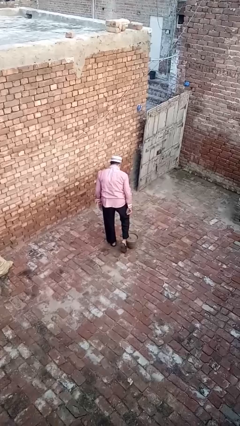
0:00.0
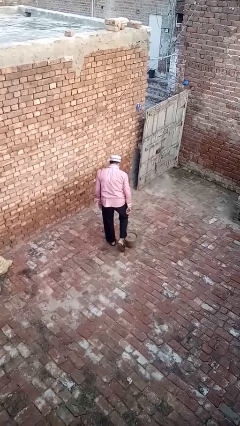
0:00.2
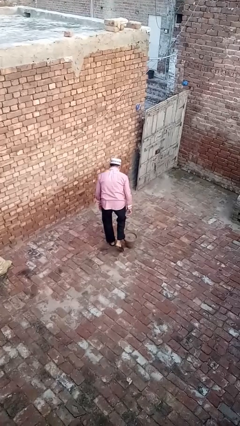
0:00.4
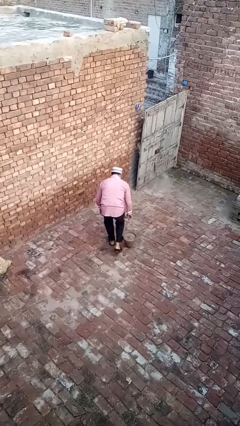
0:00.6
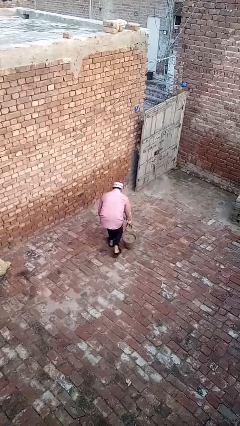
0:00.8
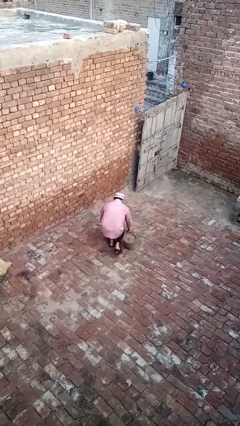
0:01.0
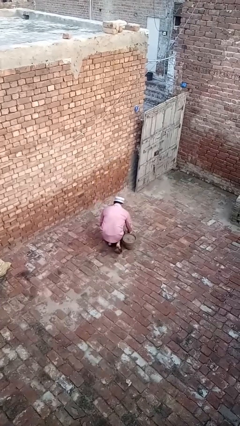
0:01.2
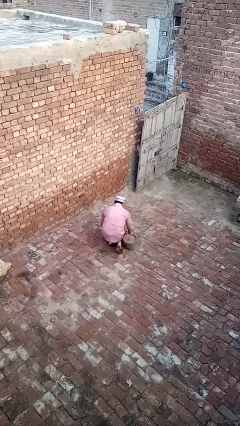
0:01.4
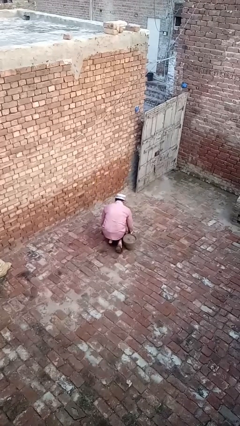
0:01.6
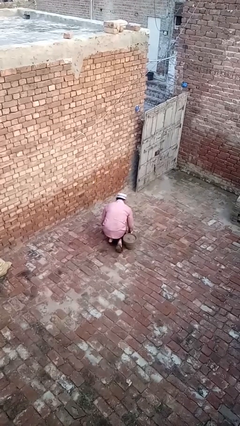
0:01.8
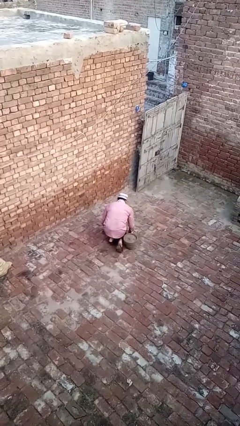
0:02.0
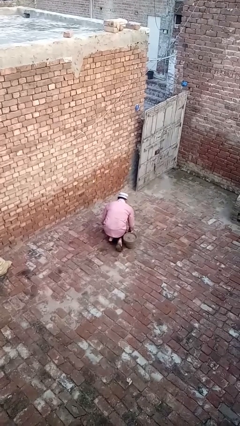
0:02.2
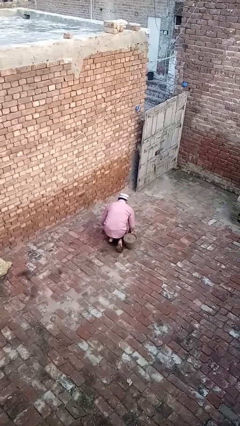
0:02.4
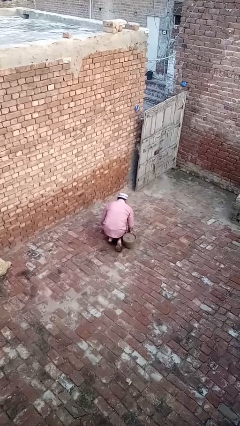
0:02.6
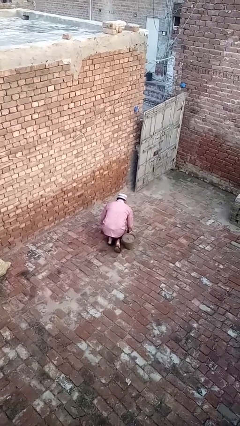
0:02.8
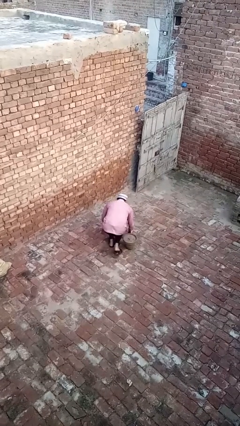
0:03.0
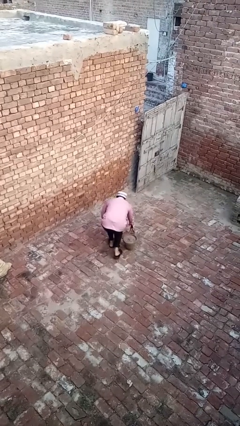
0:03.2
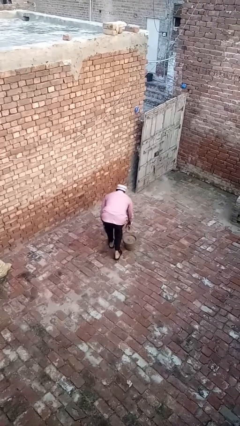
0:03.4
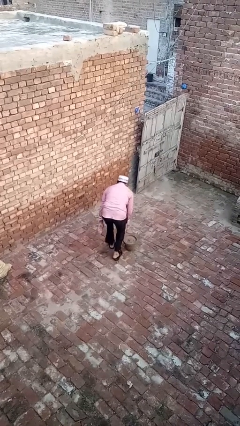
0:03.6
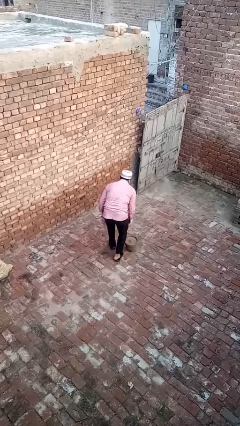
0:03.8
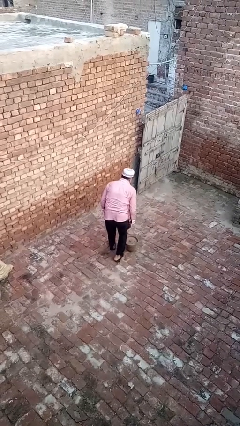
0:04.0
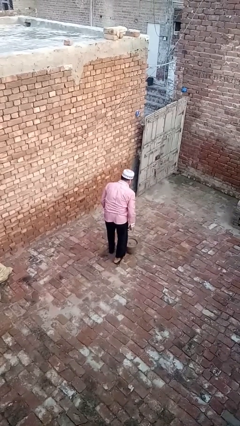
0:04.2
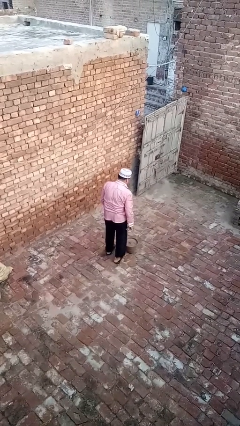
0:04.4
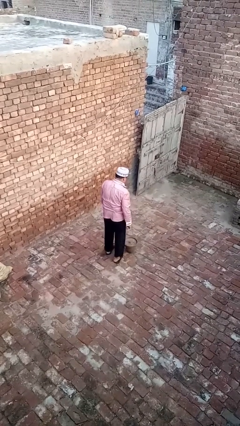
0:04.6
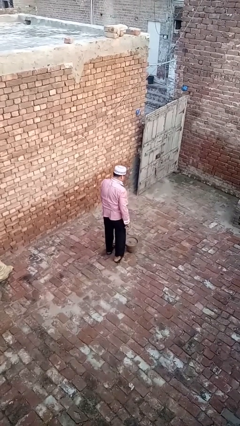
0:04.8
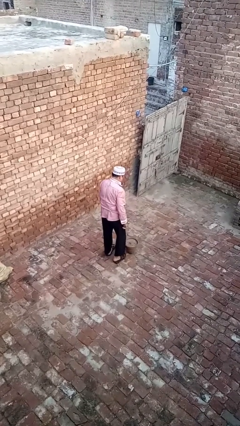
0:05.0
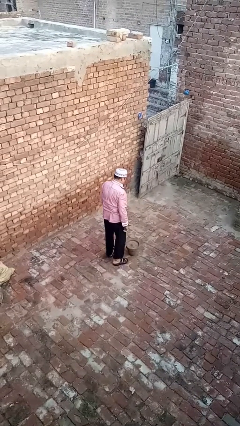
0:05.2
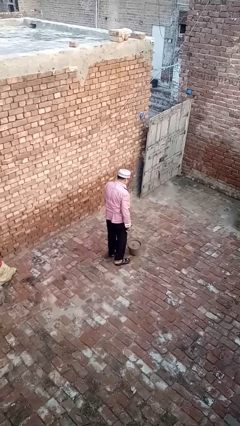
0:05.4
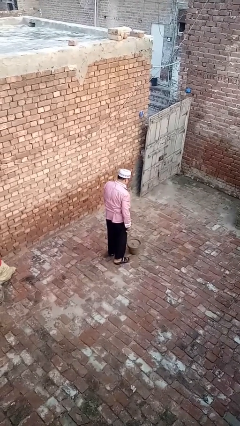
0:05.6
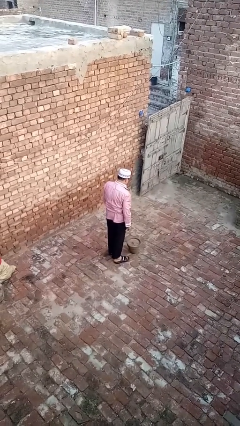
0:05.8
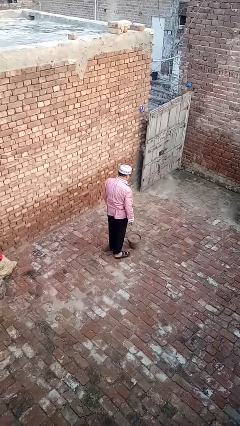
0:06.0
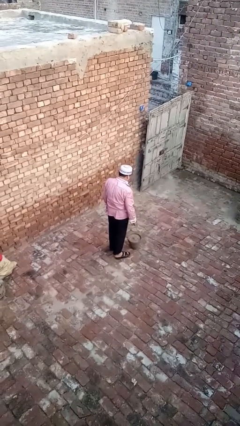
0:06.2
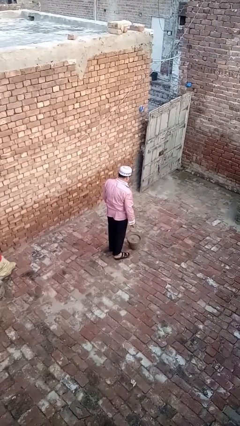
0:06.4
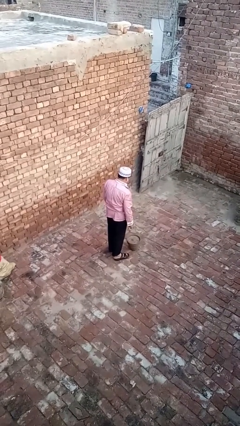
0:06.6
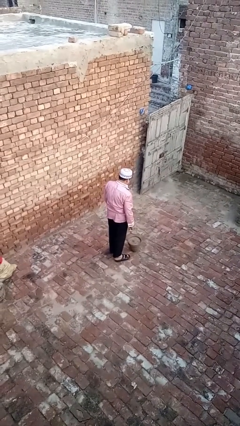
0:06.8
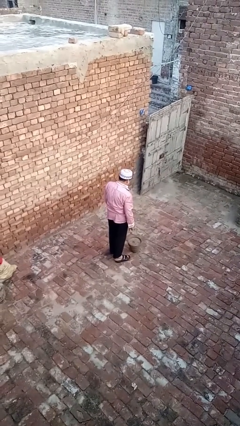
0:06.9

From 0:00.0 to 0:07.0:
person lies down on floor

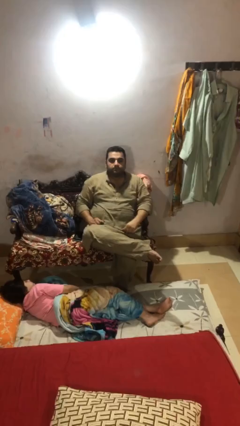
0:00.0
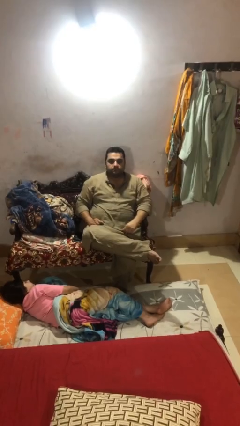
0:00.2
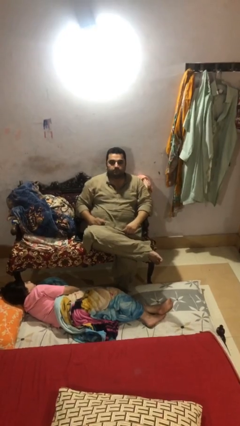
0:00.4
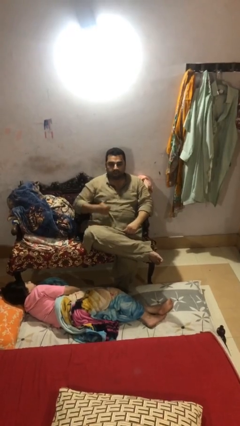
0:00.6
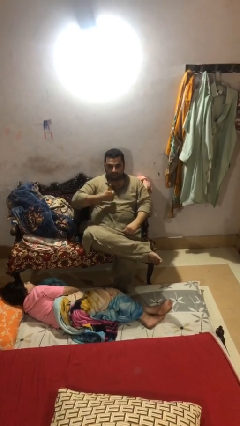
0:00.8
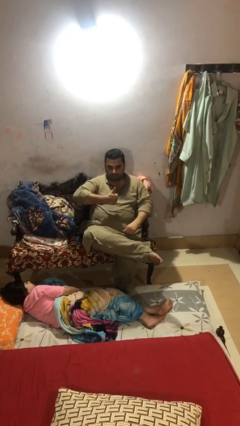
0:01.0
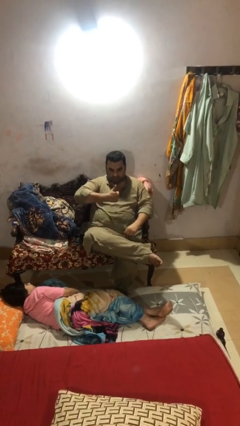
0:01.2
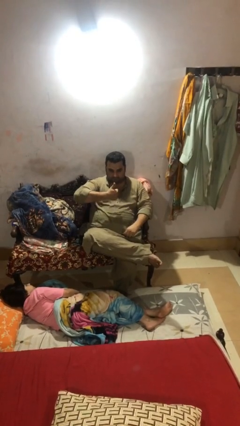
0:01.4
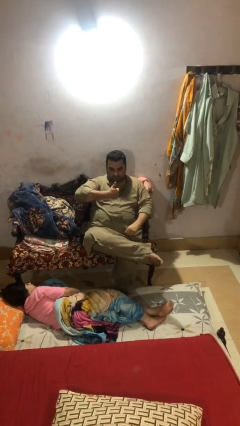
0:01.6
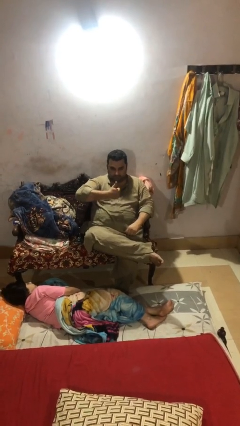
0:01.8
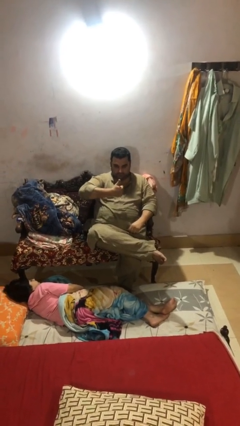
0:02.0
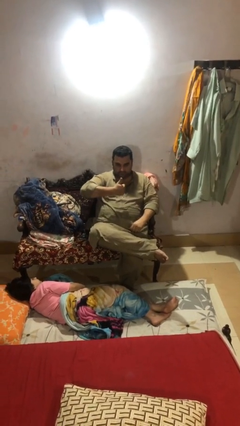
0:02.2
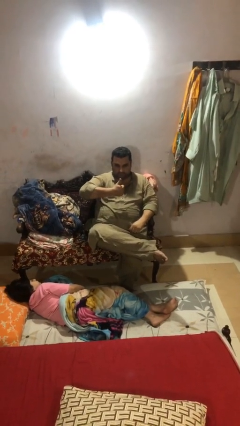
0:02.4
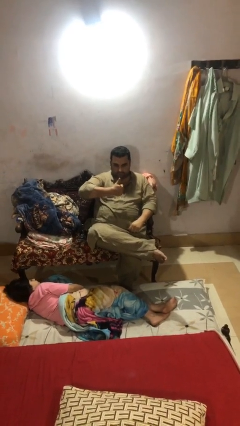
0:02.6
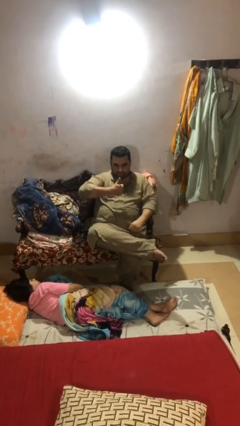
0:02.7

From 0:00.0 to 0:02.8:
person gestures thumbs up

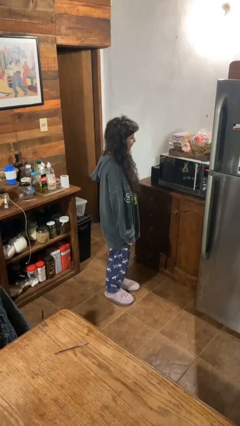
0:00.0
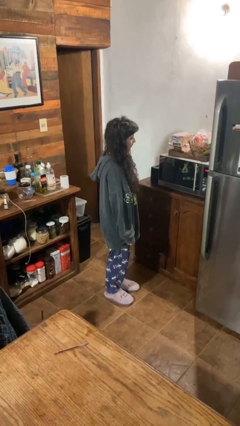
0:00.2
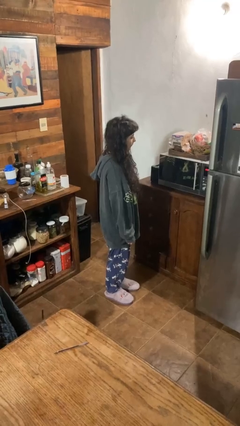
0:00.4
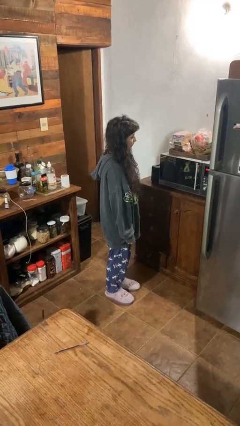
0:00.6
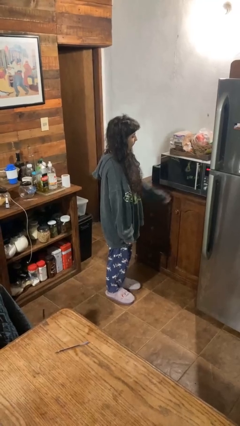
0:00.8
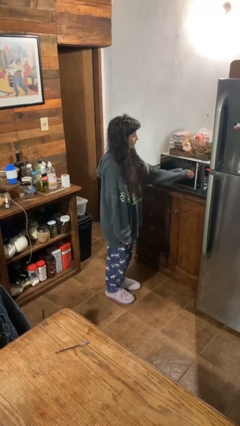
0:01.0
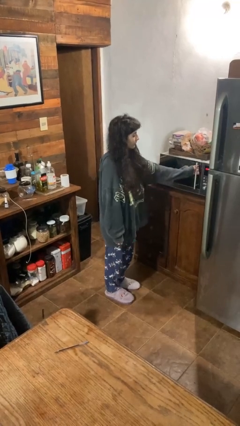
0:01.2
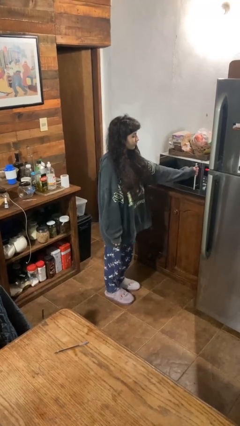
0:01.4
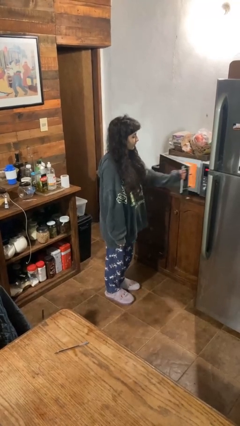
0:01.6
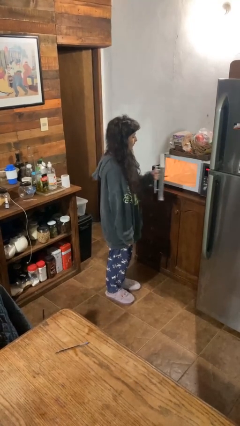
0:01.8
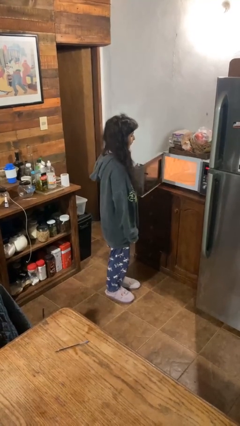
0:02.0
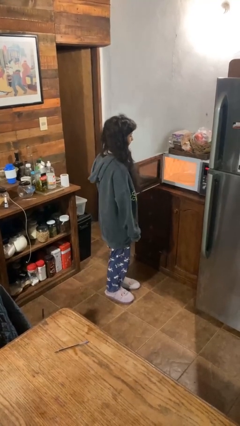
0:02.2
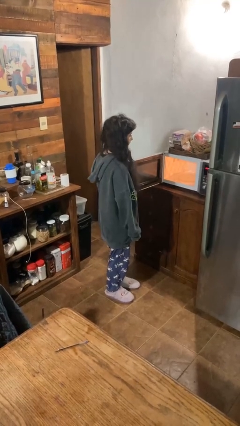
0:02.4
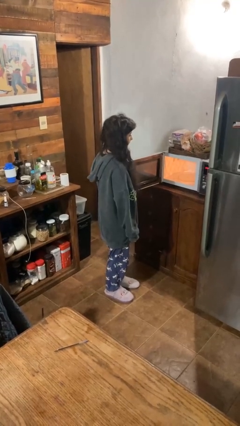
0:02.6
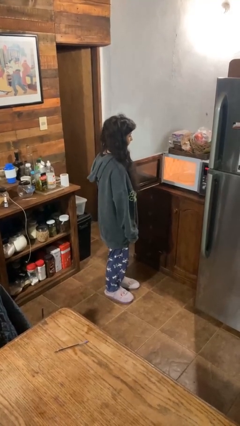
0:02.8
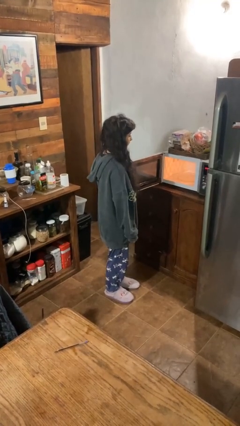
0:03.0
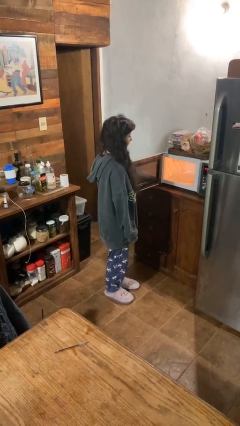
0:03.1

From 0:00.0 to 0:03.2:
person opens microwave

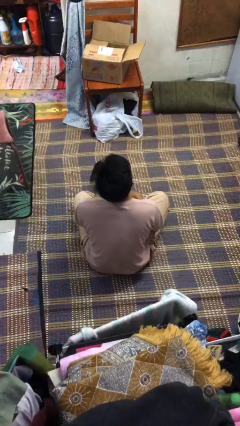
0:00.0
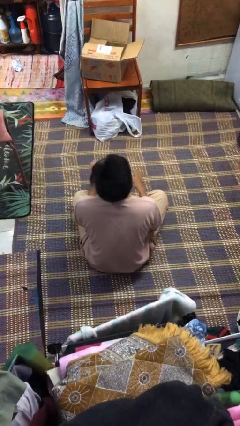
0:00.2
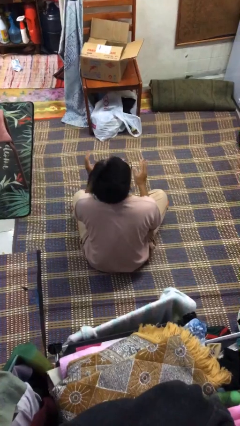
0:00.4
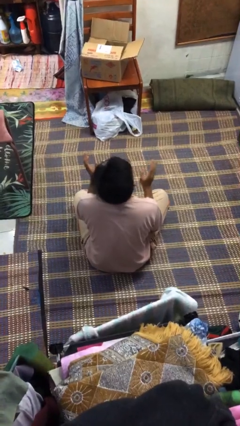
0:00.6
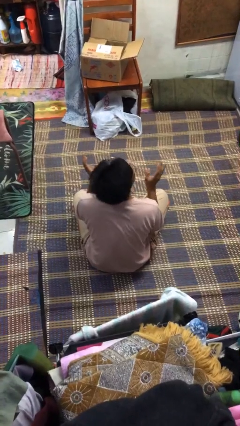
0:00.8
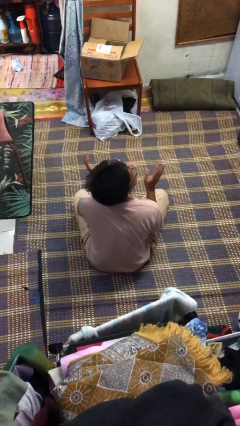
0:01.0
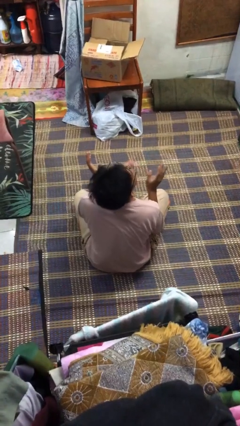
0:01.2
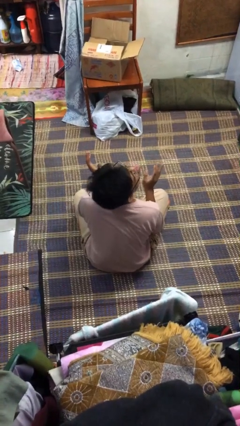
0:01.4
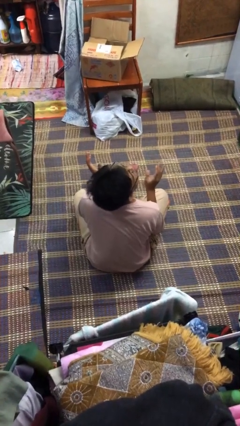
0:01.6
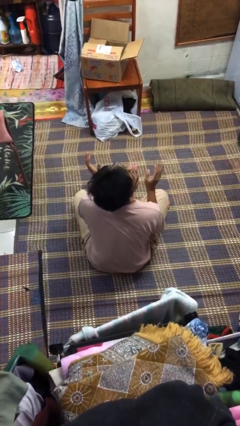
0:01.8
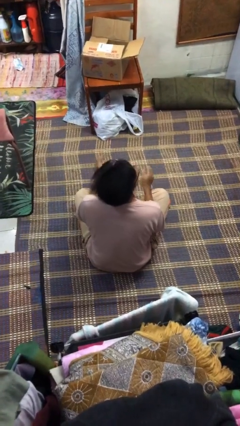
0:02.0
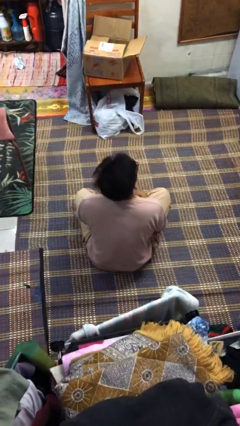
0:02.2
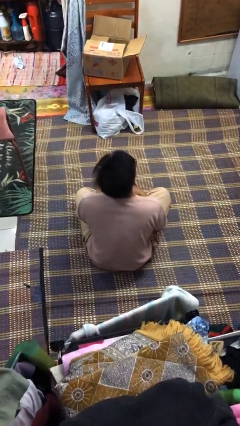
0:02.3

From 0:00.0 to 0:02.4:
person sticks out tongue

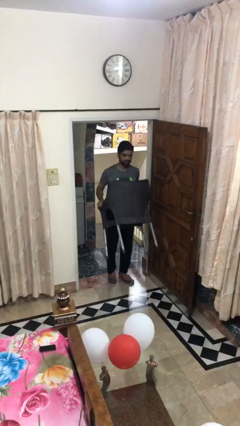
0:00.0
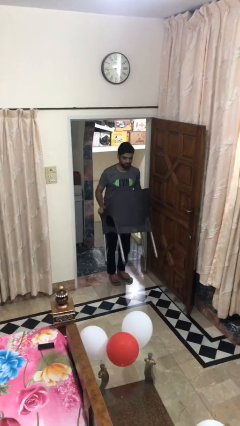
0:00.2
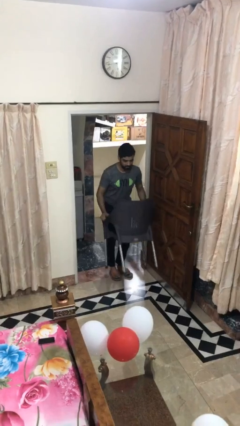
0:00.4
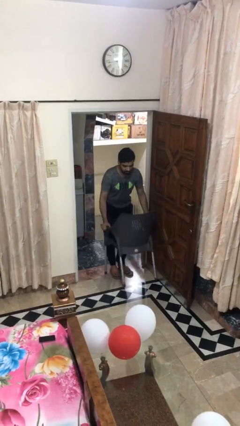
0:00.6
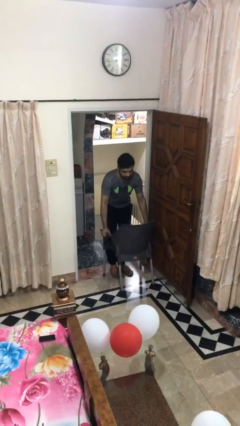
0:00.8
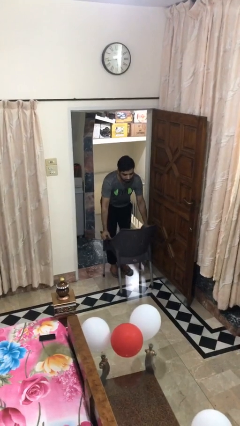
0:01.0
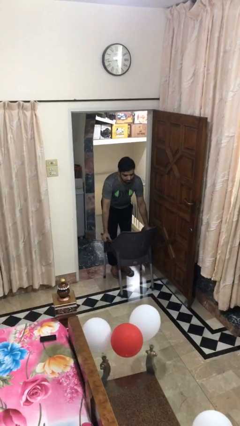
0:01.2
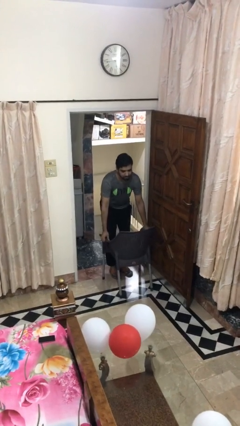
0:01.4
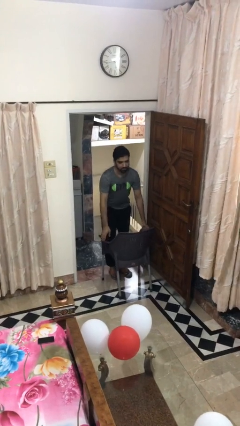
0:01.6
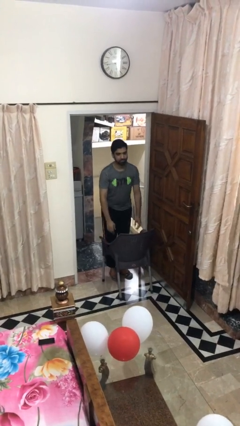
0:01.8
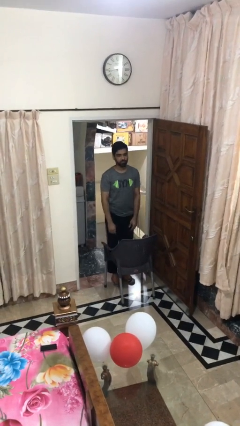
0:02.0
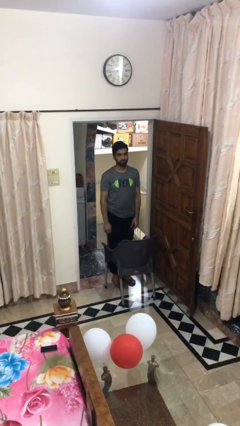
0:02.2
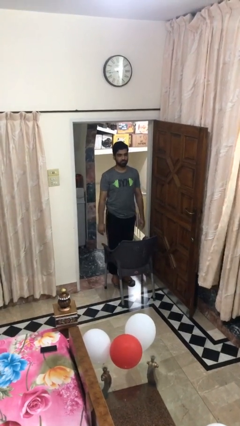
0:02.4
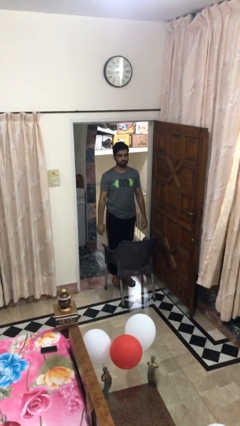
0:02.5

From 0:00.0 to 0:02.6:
person puts down object on floor
